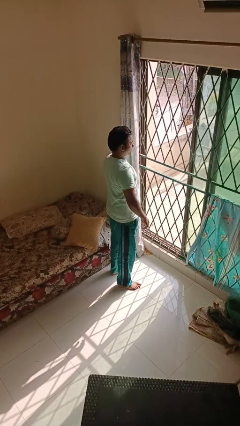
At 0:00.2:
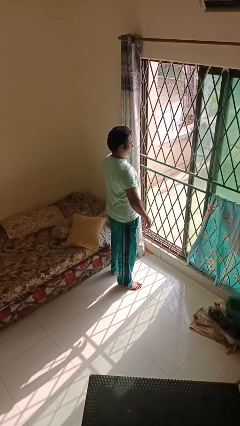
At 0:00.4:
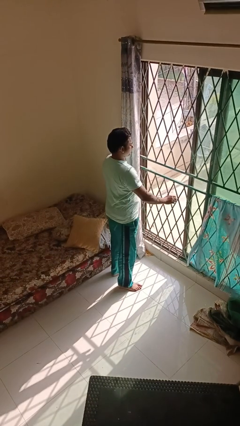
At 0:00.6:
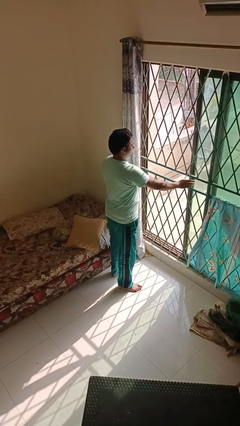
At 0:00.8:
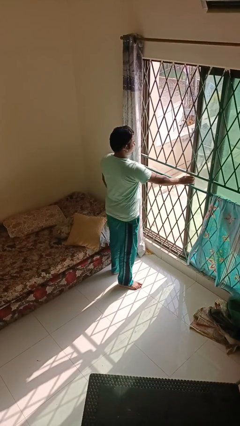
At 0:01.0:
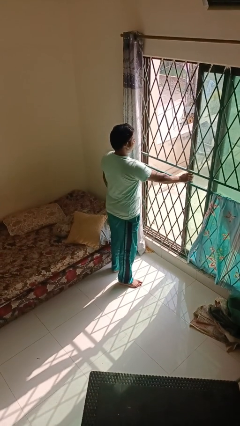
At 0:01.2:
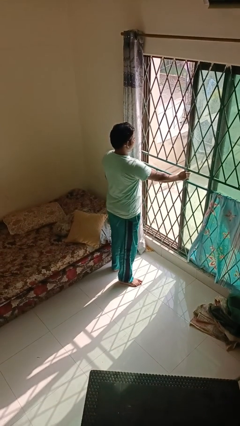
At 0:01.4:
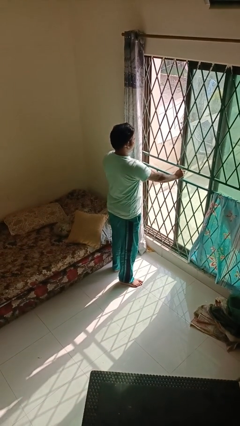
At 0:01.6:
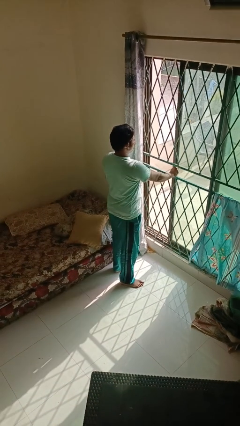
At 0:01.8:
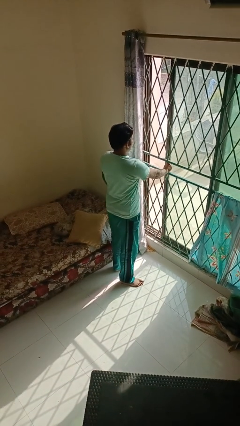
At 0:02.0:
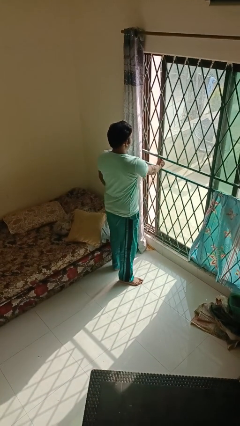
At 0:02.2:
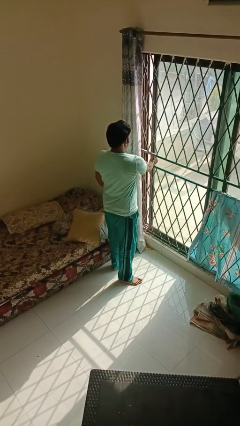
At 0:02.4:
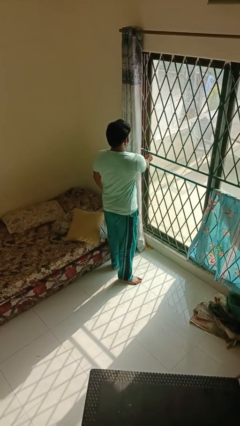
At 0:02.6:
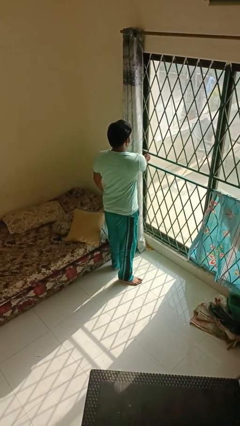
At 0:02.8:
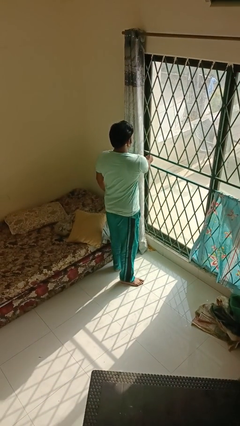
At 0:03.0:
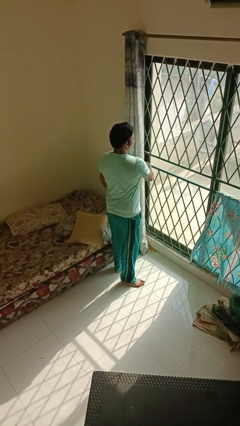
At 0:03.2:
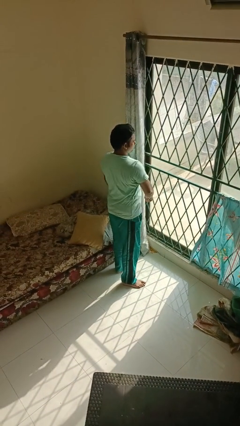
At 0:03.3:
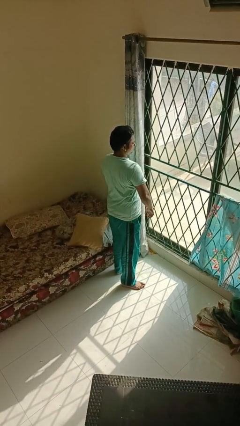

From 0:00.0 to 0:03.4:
person closes home window

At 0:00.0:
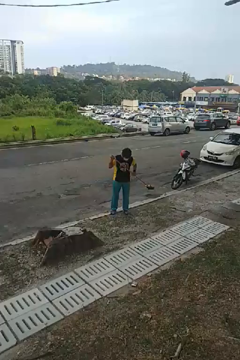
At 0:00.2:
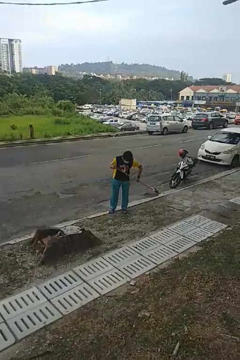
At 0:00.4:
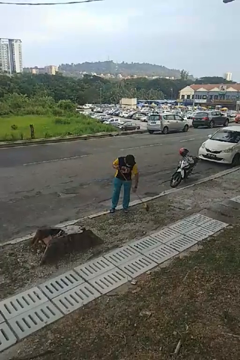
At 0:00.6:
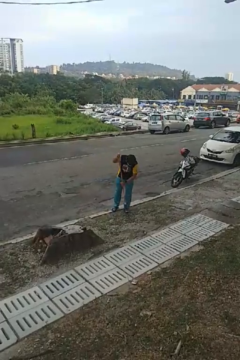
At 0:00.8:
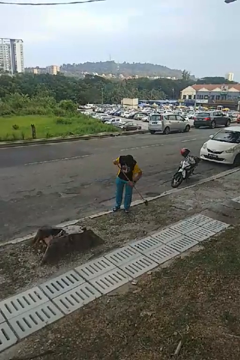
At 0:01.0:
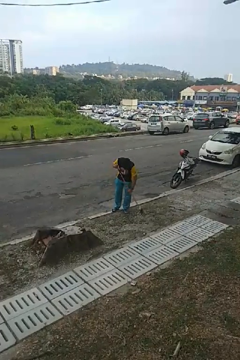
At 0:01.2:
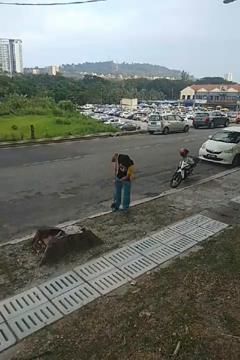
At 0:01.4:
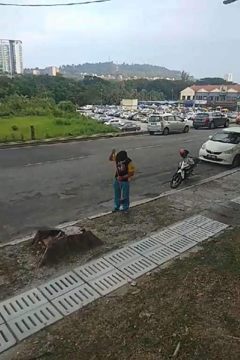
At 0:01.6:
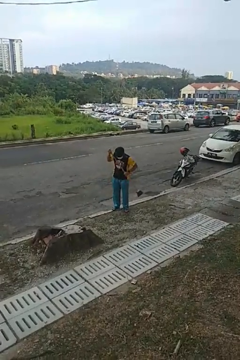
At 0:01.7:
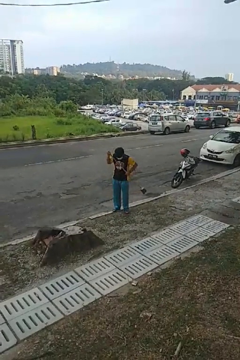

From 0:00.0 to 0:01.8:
person sweeps floor

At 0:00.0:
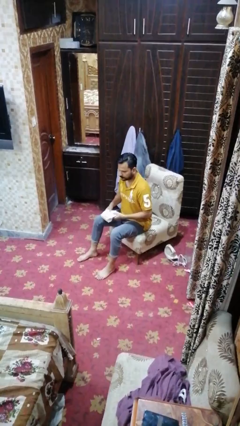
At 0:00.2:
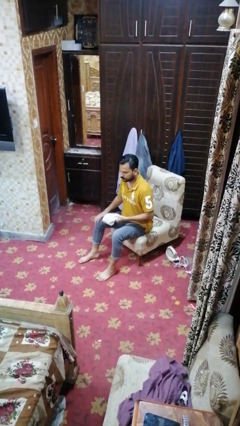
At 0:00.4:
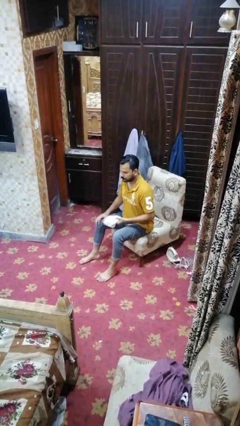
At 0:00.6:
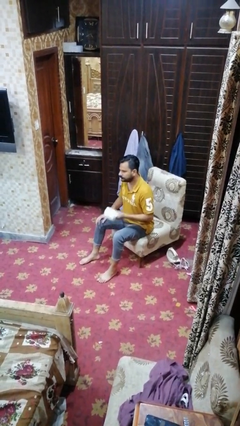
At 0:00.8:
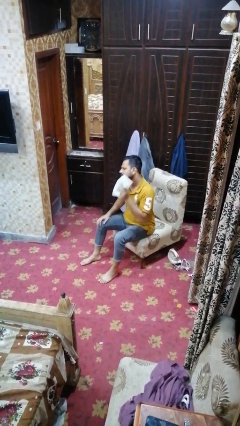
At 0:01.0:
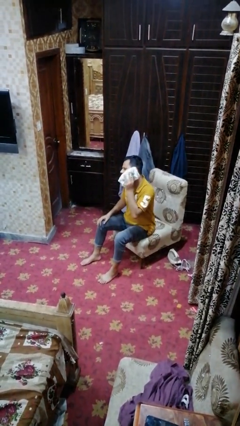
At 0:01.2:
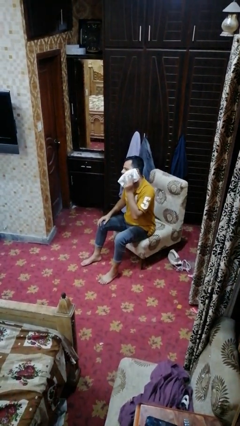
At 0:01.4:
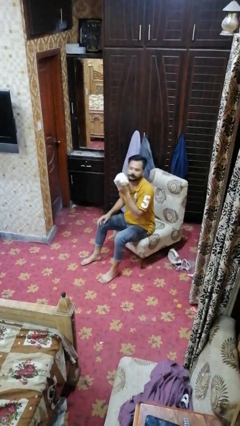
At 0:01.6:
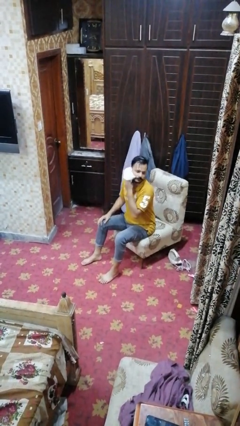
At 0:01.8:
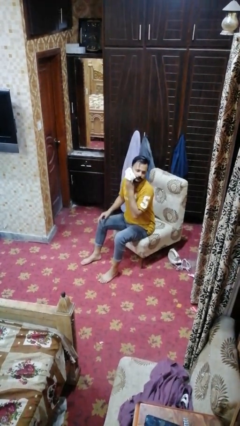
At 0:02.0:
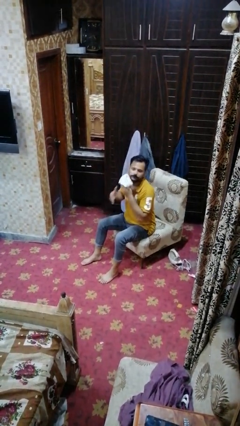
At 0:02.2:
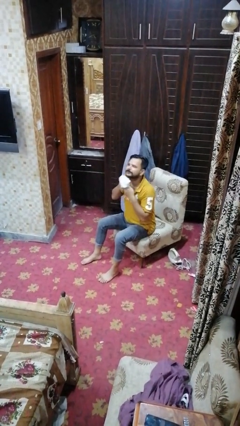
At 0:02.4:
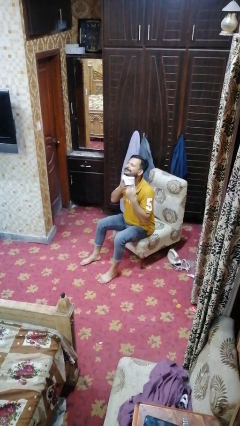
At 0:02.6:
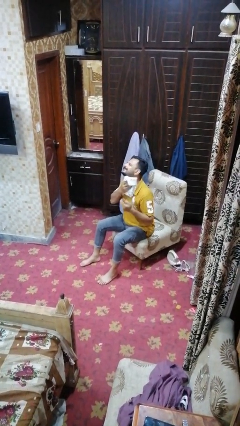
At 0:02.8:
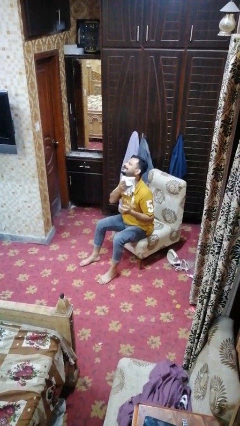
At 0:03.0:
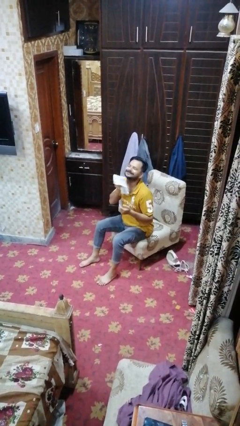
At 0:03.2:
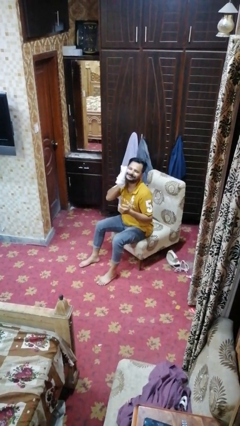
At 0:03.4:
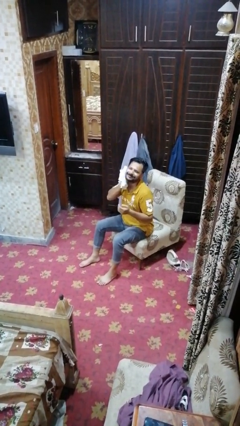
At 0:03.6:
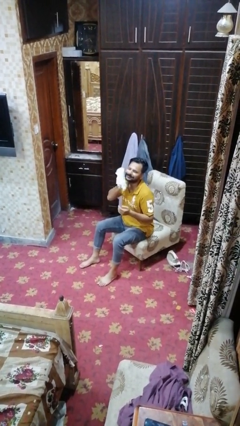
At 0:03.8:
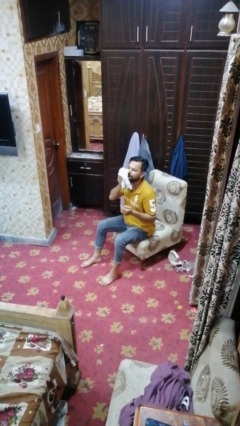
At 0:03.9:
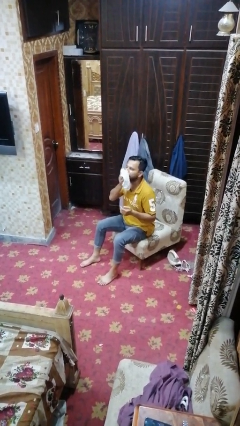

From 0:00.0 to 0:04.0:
person wipes mouth with napkin

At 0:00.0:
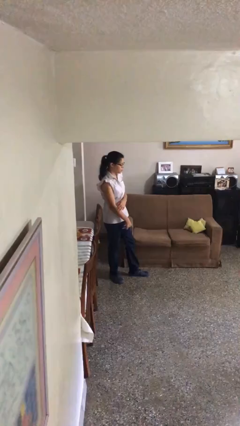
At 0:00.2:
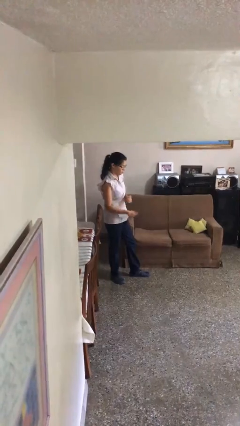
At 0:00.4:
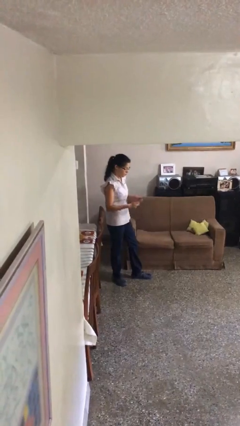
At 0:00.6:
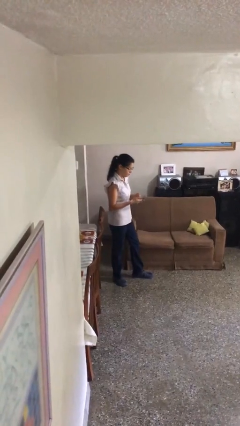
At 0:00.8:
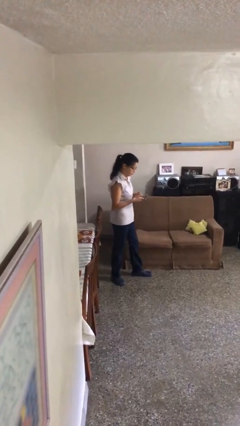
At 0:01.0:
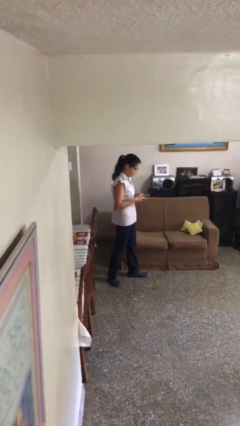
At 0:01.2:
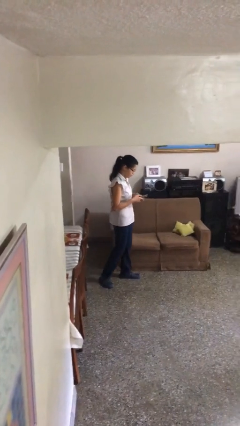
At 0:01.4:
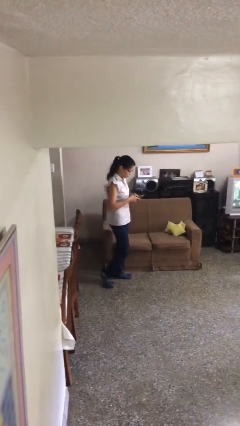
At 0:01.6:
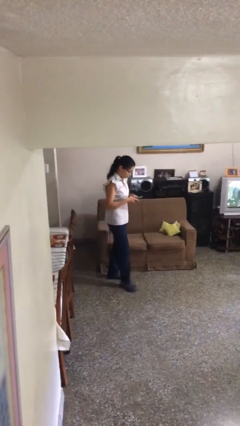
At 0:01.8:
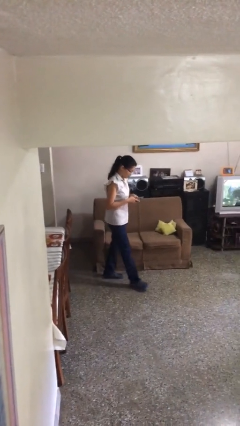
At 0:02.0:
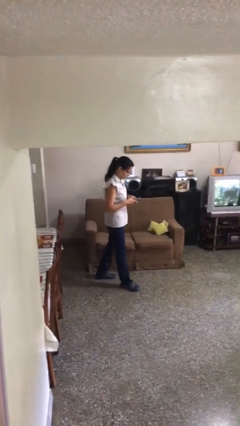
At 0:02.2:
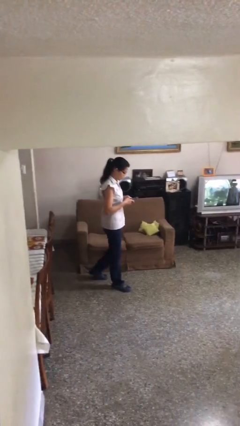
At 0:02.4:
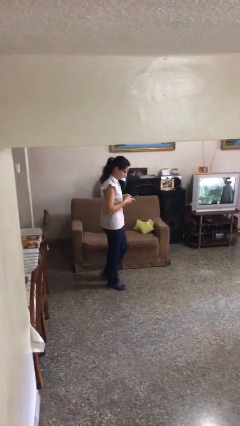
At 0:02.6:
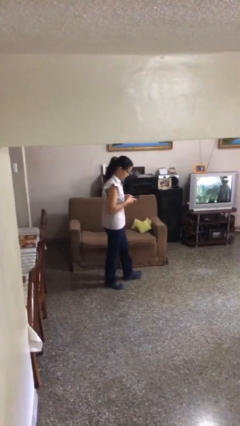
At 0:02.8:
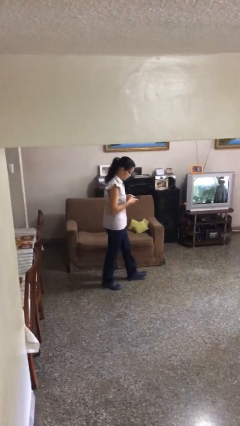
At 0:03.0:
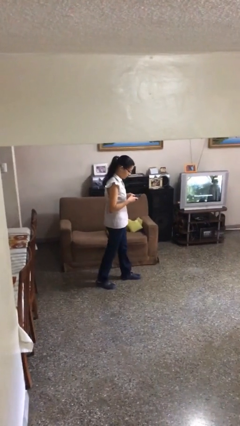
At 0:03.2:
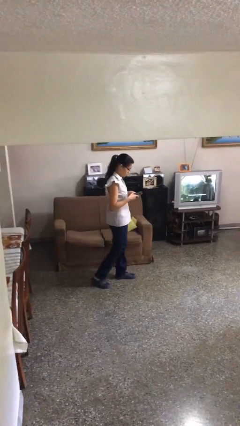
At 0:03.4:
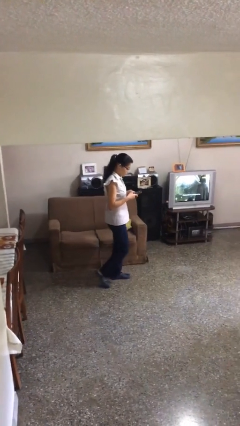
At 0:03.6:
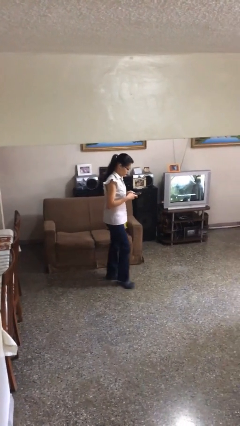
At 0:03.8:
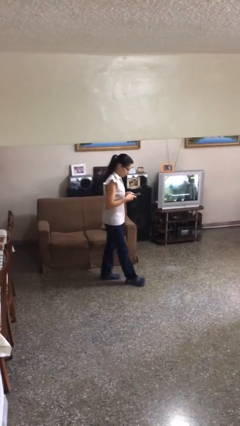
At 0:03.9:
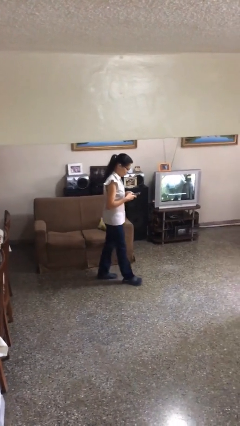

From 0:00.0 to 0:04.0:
person texts on phone

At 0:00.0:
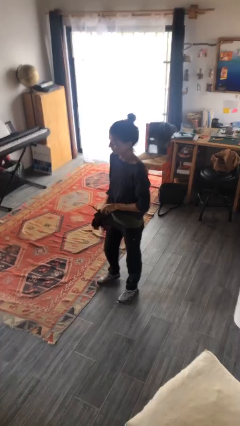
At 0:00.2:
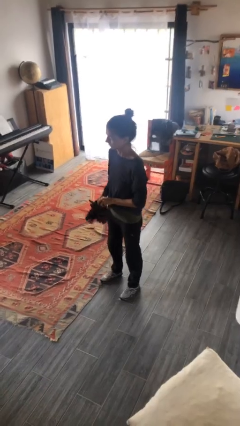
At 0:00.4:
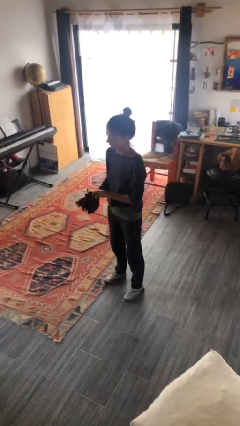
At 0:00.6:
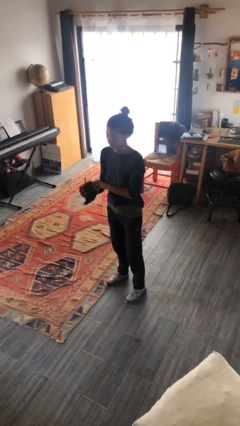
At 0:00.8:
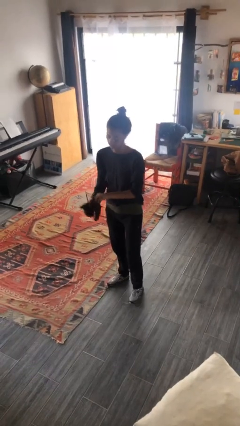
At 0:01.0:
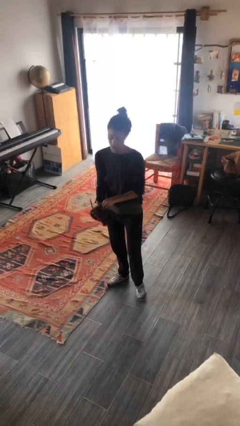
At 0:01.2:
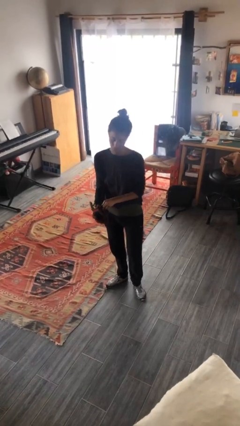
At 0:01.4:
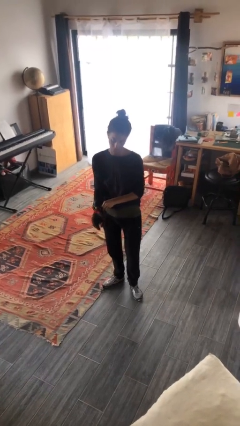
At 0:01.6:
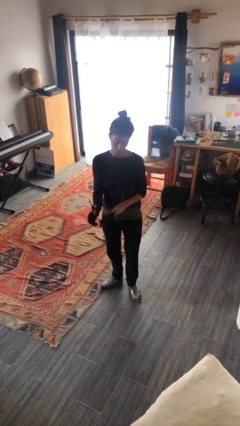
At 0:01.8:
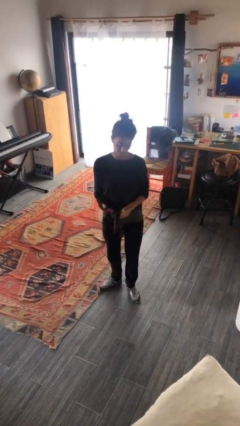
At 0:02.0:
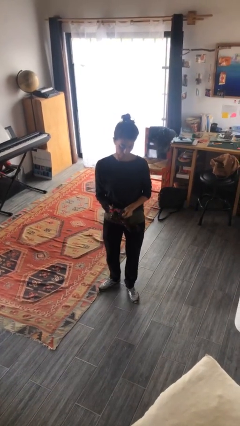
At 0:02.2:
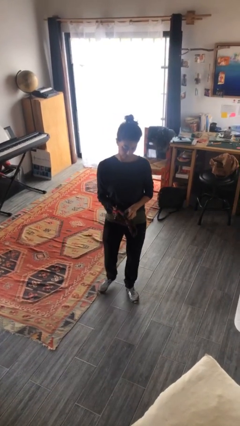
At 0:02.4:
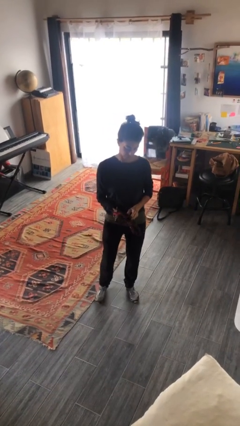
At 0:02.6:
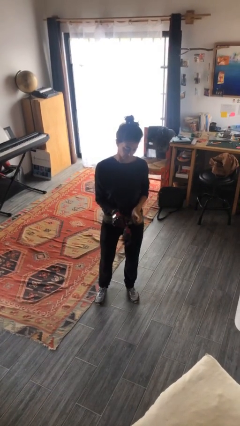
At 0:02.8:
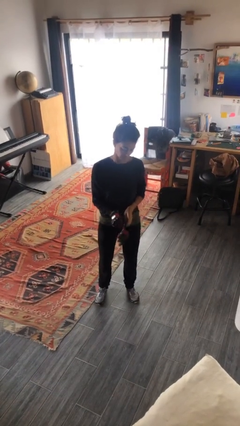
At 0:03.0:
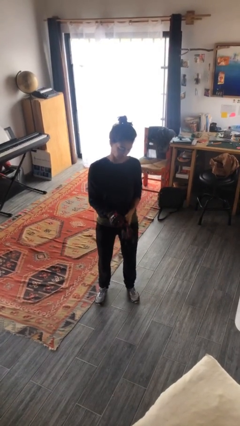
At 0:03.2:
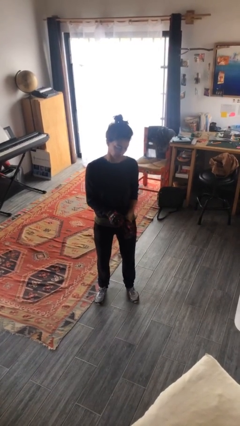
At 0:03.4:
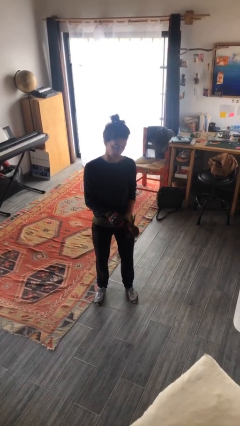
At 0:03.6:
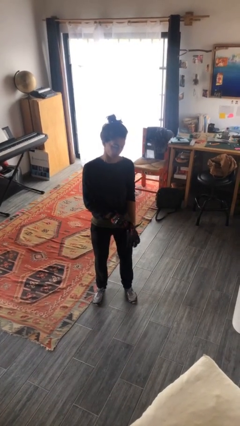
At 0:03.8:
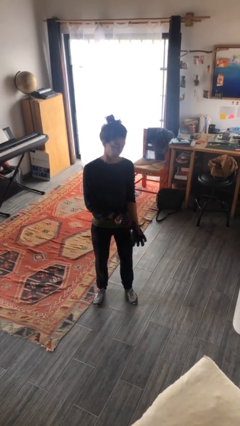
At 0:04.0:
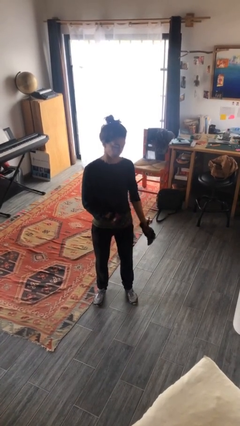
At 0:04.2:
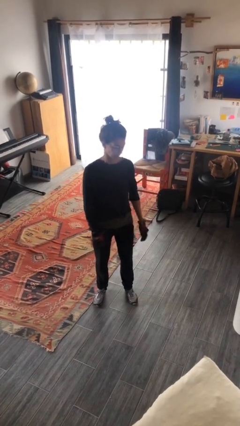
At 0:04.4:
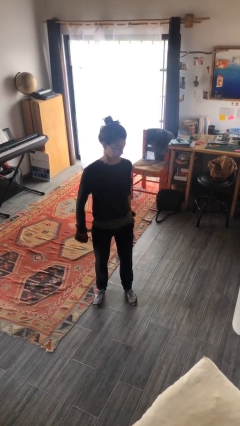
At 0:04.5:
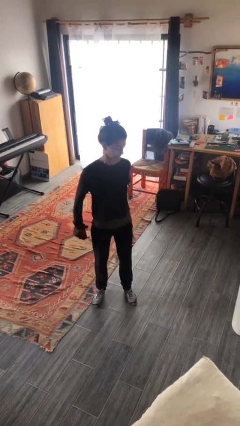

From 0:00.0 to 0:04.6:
person puts on gloves

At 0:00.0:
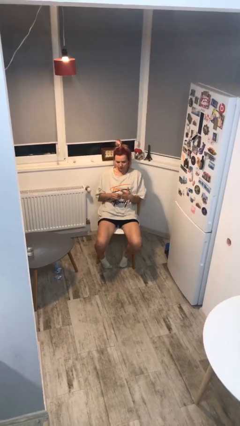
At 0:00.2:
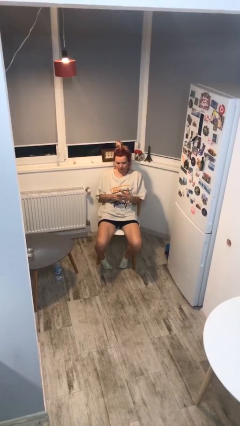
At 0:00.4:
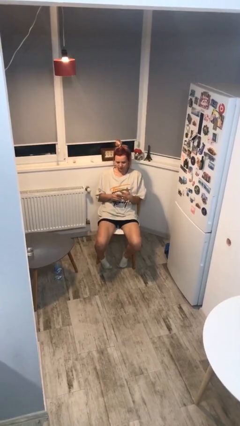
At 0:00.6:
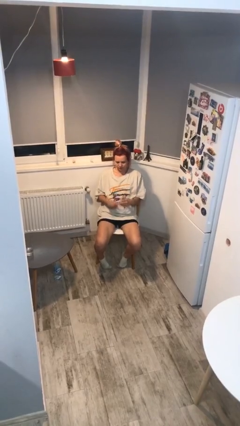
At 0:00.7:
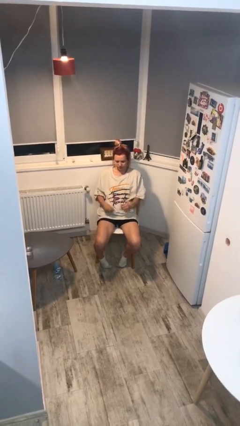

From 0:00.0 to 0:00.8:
person puts on ring
